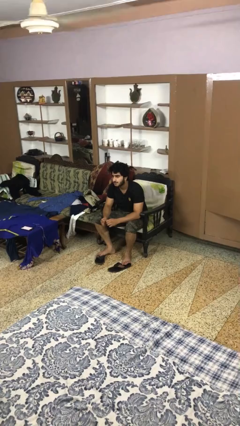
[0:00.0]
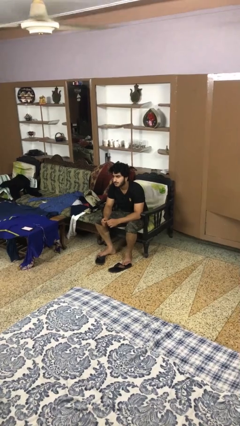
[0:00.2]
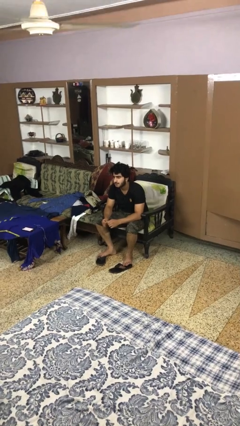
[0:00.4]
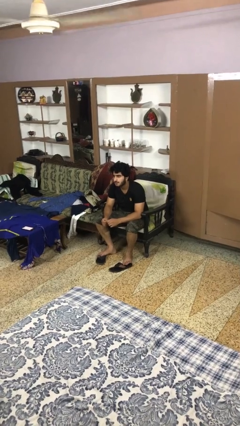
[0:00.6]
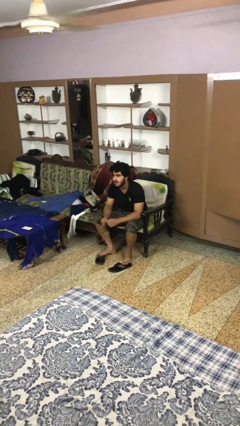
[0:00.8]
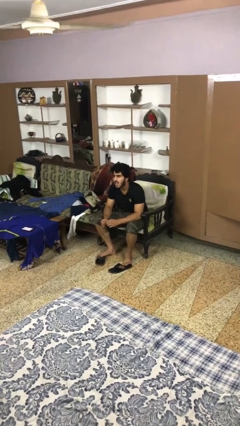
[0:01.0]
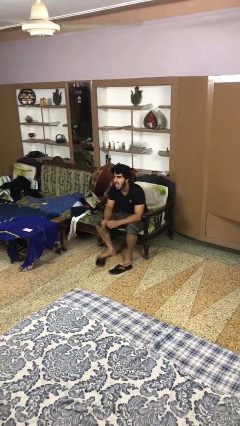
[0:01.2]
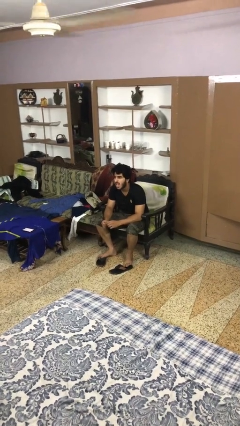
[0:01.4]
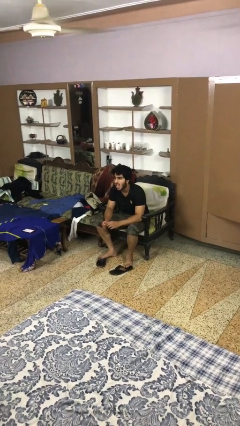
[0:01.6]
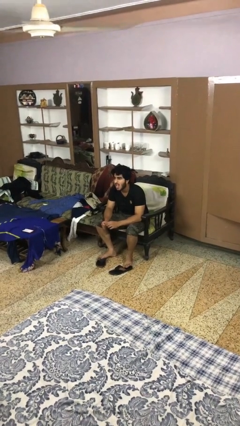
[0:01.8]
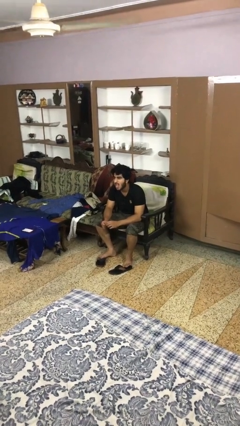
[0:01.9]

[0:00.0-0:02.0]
person sticks out tongue

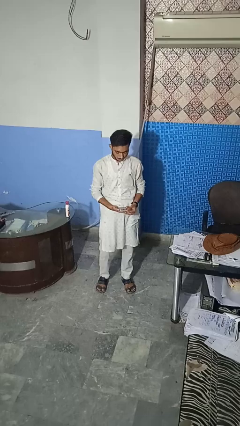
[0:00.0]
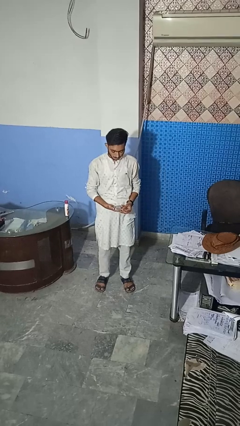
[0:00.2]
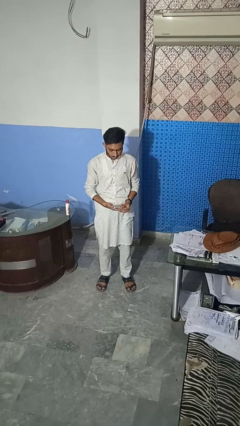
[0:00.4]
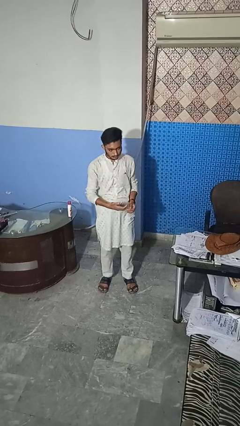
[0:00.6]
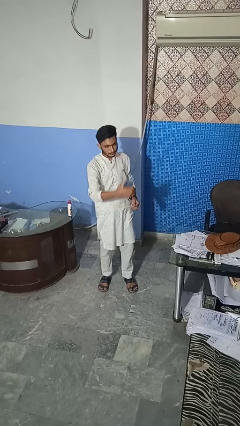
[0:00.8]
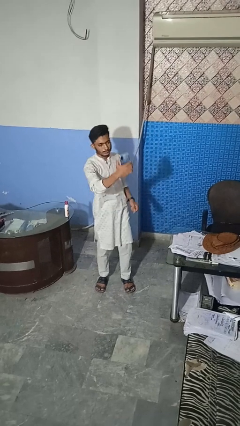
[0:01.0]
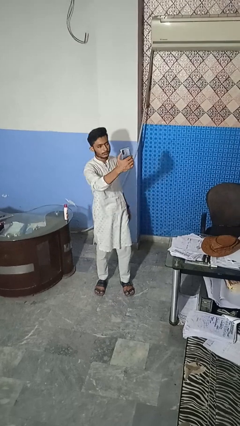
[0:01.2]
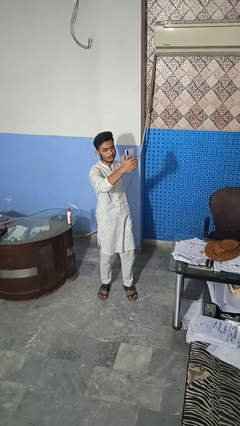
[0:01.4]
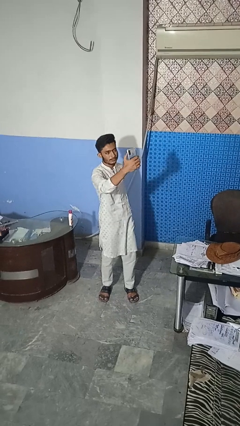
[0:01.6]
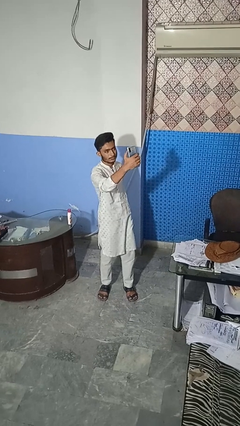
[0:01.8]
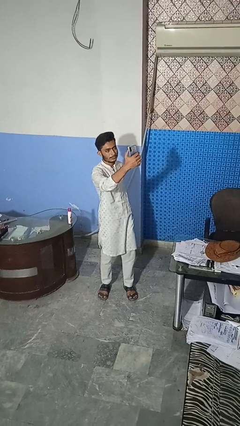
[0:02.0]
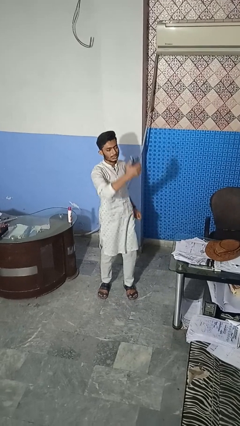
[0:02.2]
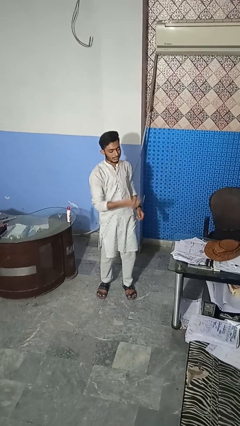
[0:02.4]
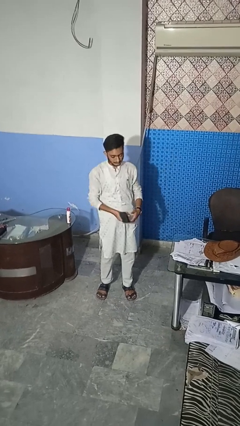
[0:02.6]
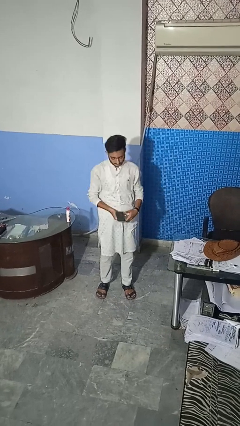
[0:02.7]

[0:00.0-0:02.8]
person takes selfie

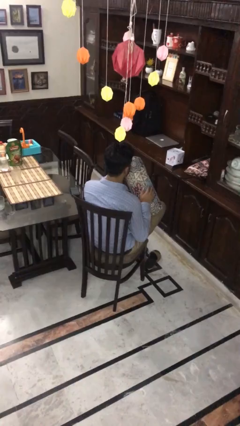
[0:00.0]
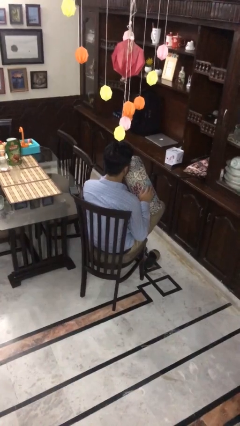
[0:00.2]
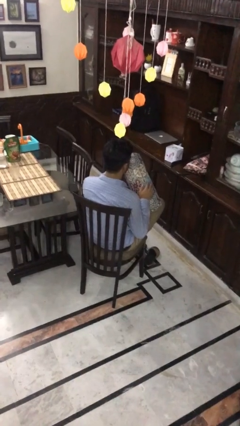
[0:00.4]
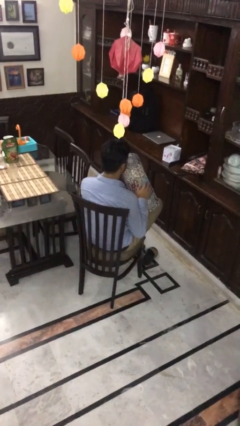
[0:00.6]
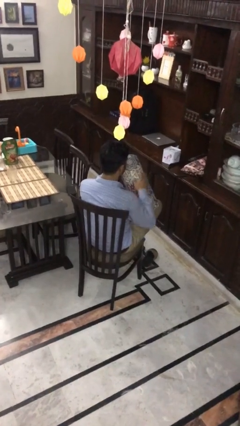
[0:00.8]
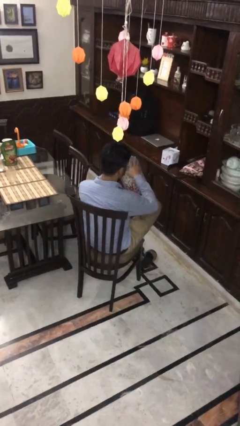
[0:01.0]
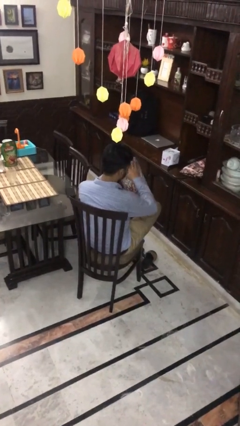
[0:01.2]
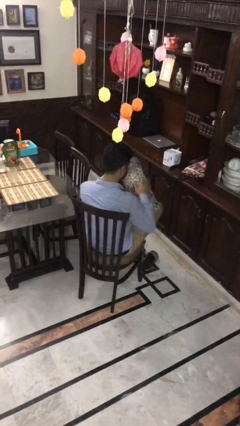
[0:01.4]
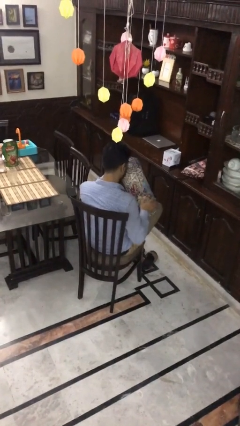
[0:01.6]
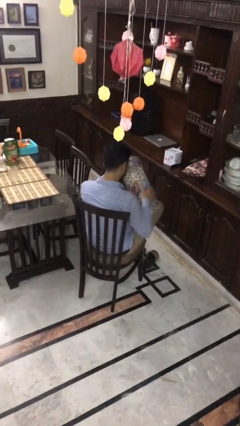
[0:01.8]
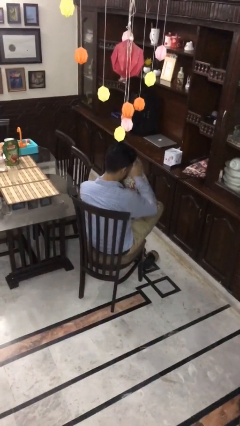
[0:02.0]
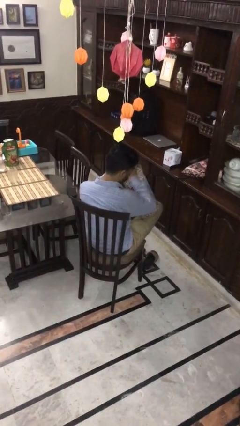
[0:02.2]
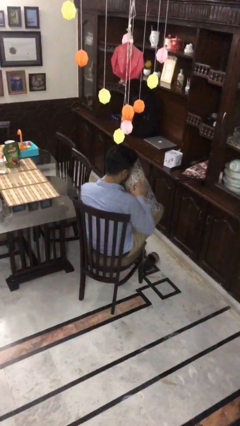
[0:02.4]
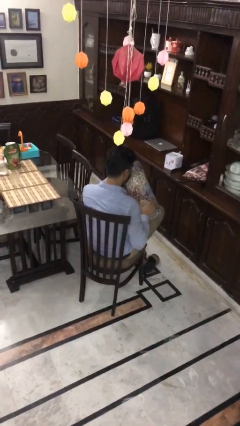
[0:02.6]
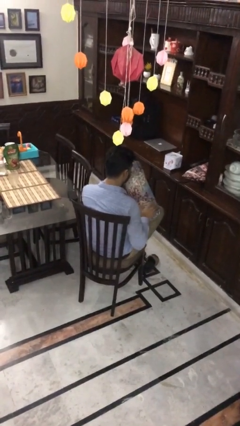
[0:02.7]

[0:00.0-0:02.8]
person waves hand over object

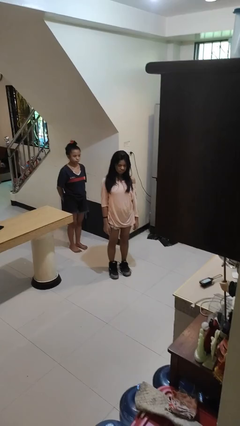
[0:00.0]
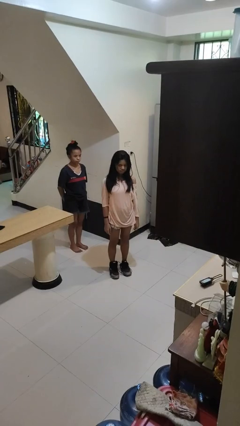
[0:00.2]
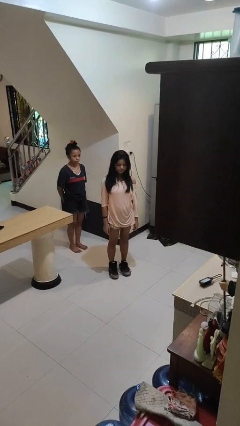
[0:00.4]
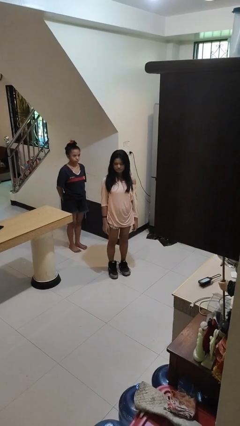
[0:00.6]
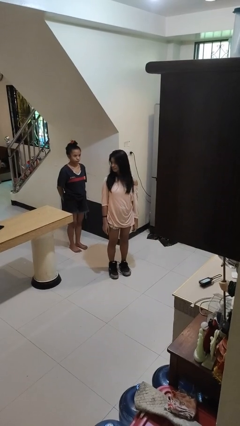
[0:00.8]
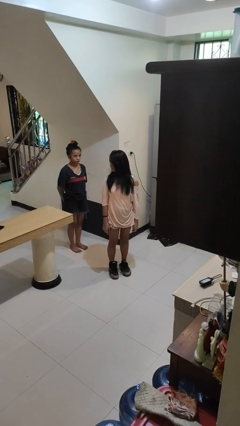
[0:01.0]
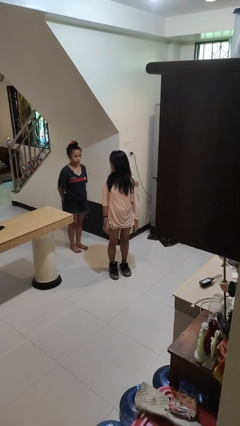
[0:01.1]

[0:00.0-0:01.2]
person looks over shoulder

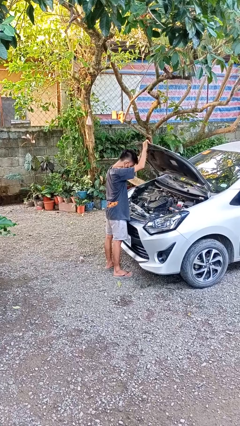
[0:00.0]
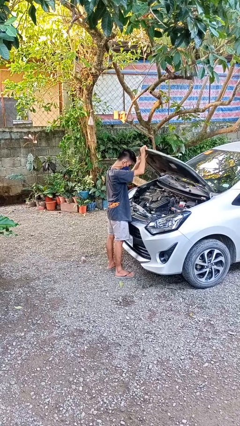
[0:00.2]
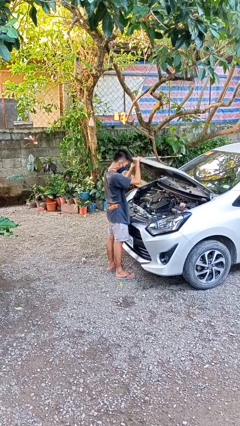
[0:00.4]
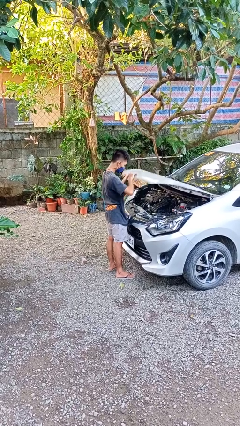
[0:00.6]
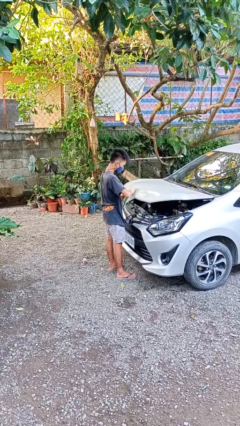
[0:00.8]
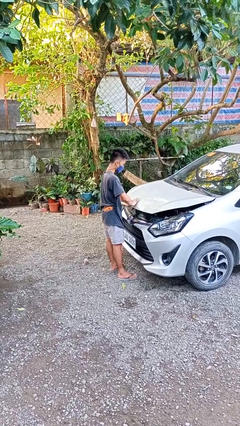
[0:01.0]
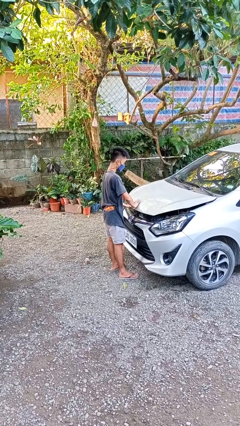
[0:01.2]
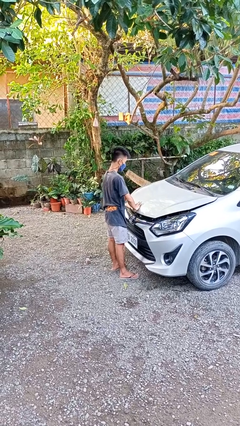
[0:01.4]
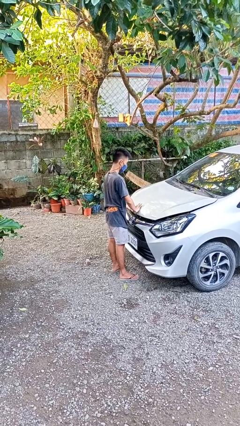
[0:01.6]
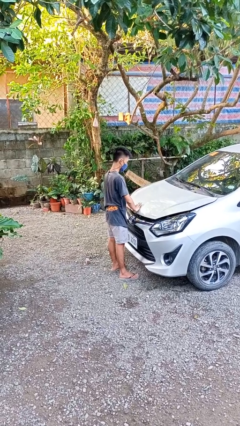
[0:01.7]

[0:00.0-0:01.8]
person closes car hood

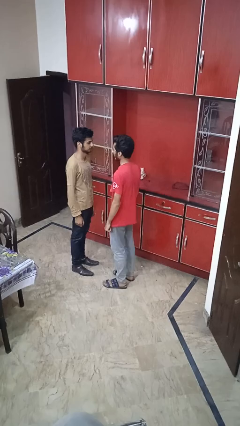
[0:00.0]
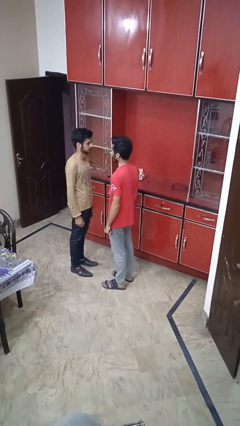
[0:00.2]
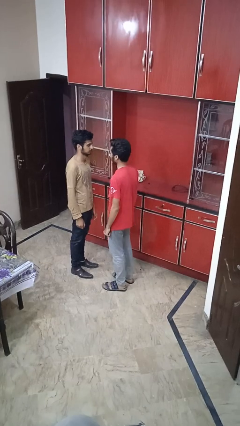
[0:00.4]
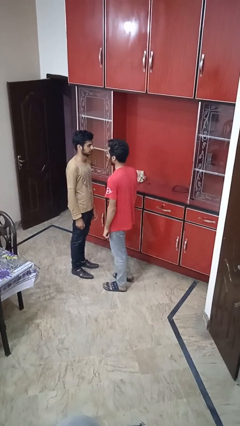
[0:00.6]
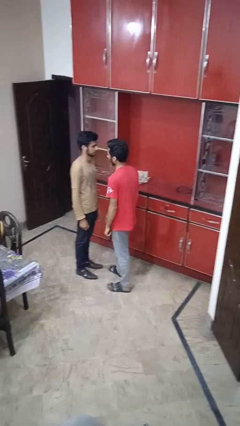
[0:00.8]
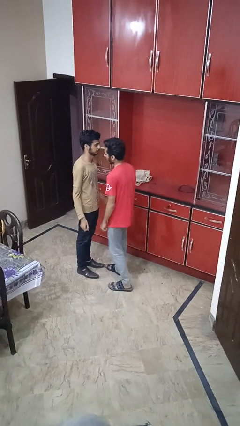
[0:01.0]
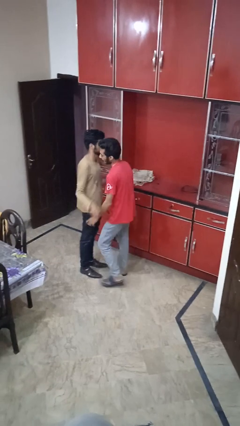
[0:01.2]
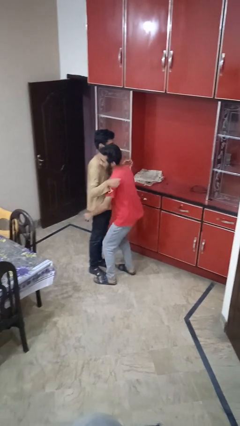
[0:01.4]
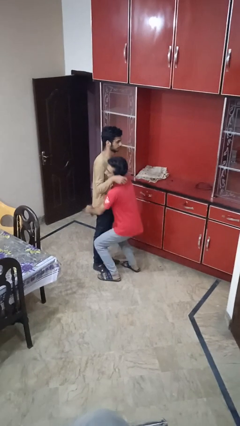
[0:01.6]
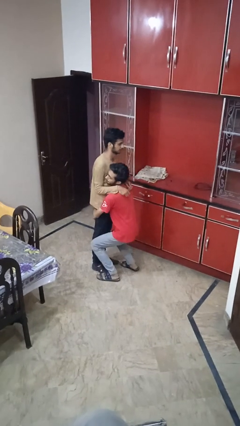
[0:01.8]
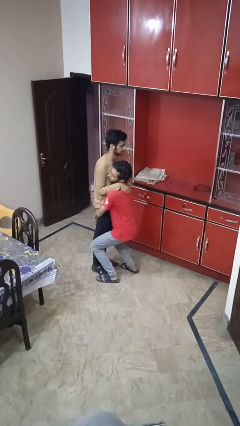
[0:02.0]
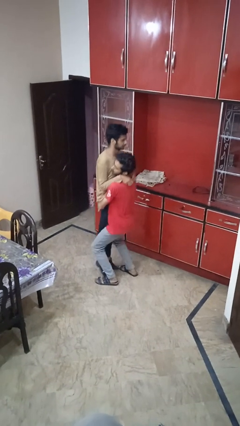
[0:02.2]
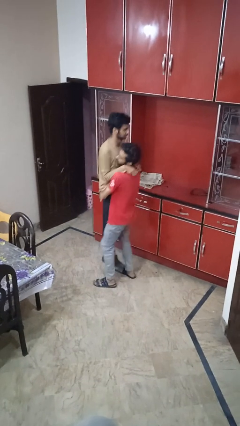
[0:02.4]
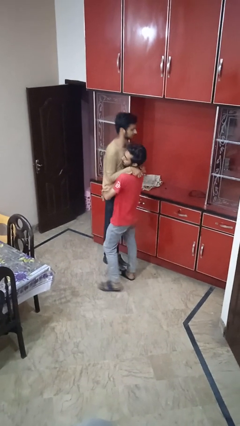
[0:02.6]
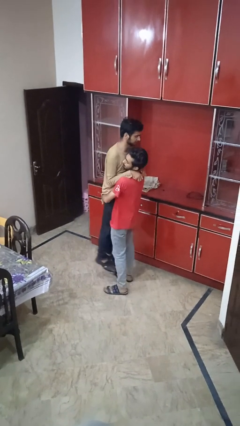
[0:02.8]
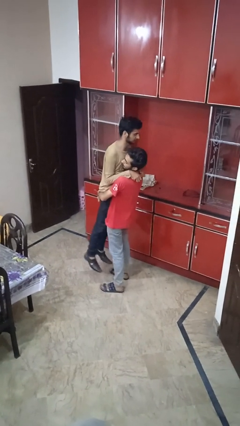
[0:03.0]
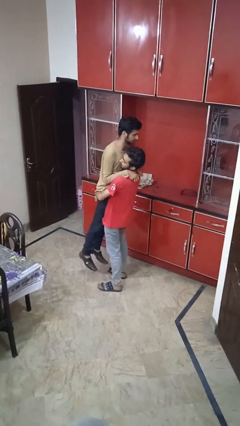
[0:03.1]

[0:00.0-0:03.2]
person picks up person

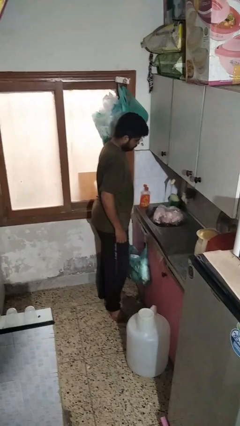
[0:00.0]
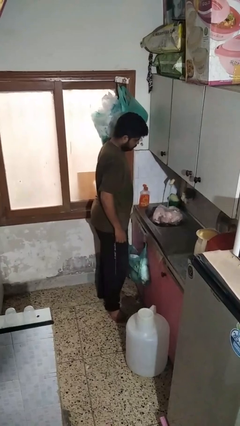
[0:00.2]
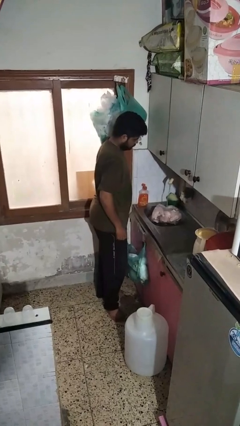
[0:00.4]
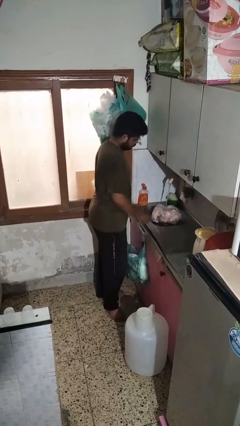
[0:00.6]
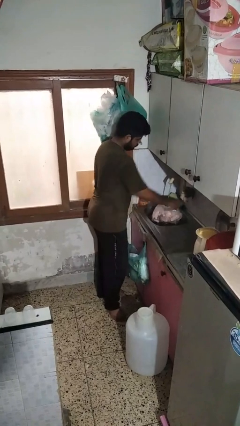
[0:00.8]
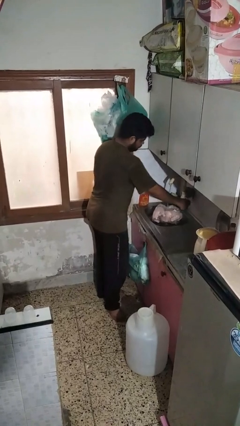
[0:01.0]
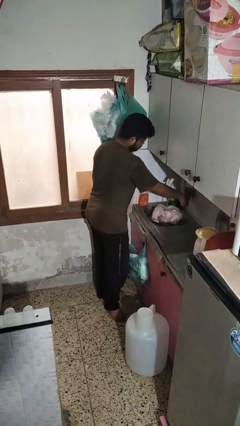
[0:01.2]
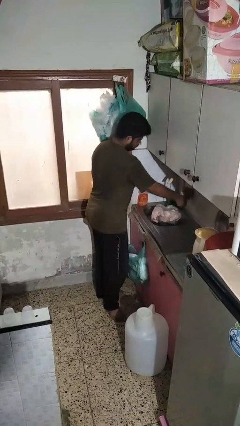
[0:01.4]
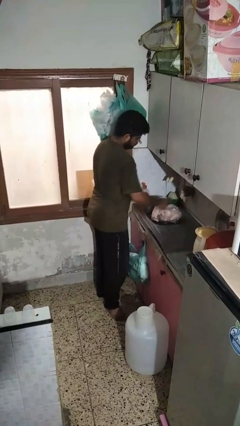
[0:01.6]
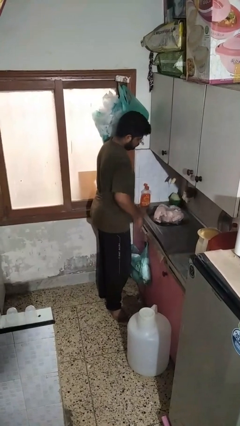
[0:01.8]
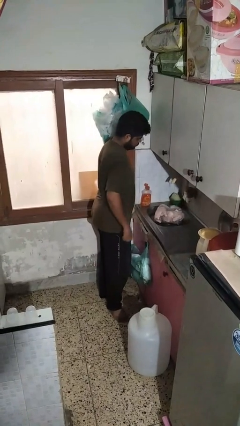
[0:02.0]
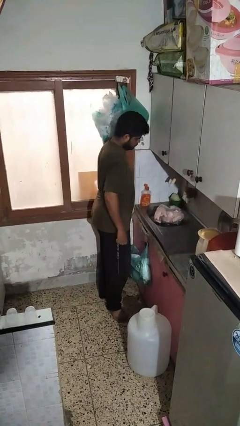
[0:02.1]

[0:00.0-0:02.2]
person turns off faucet

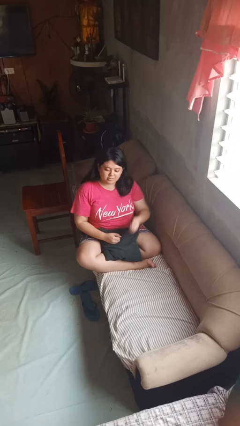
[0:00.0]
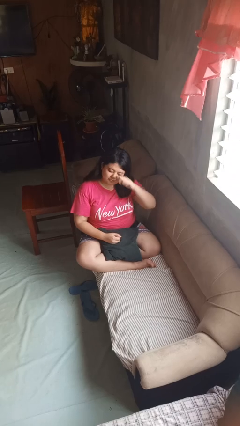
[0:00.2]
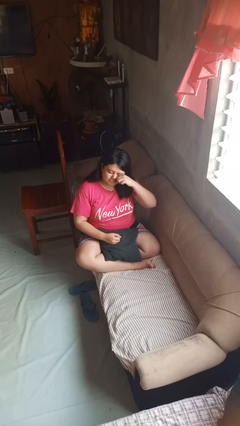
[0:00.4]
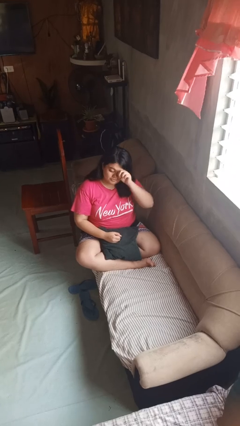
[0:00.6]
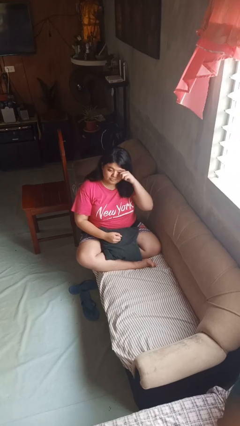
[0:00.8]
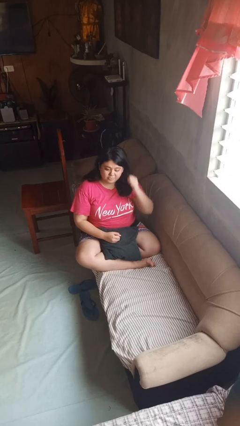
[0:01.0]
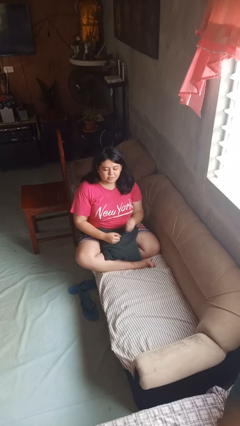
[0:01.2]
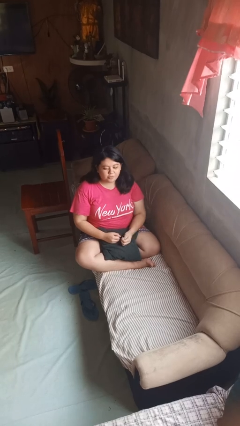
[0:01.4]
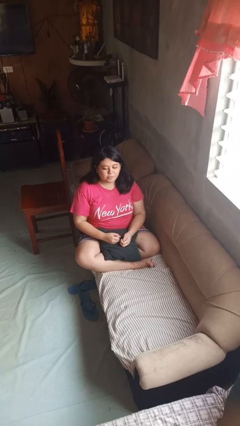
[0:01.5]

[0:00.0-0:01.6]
person rubs eyes
